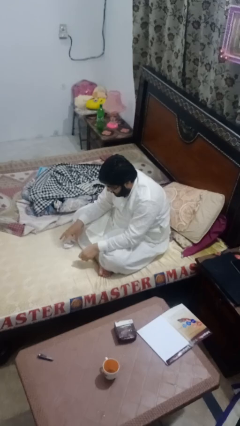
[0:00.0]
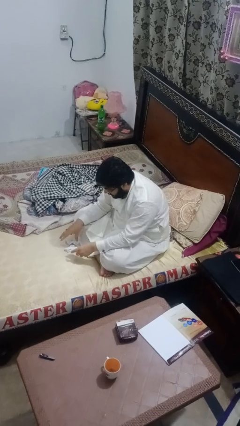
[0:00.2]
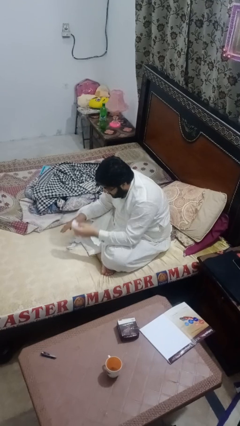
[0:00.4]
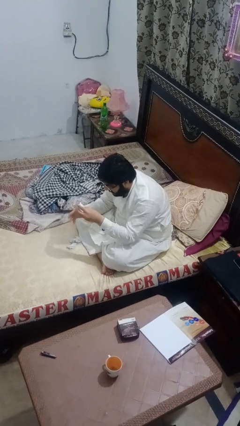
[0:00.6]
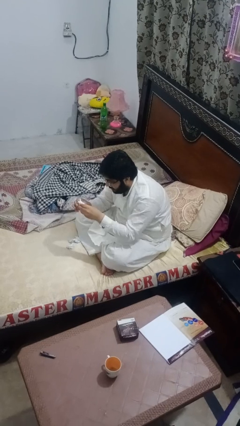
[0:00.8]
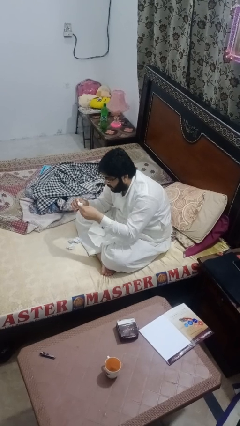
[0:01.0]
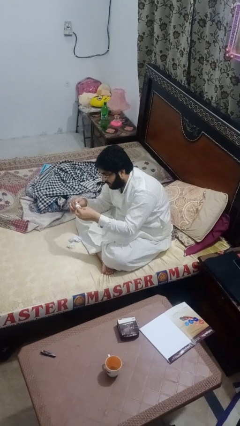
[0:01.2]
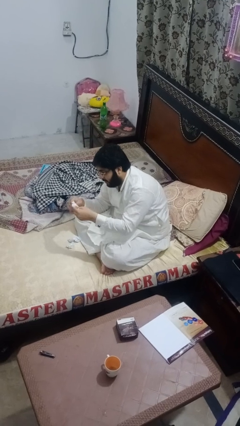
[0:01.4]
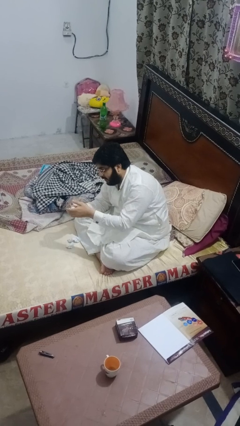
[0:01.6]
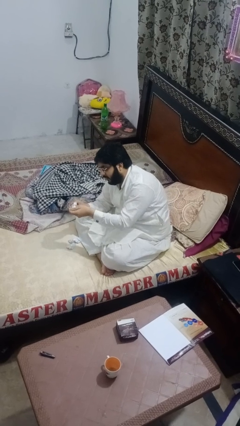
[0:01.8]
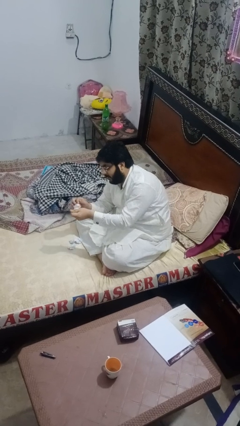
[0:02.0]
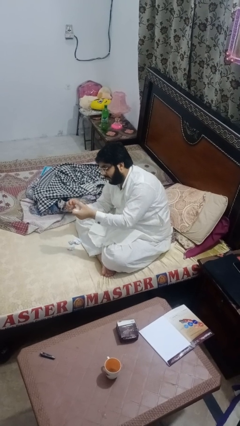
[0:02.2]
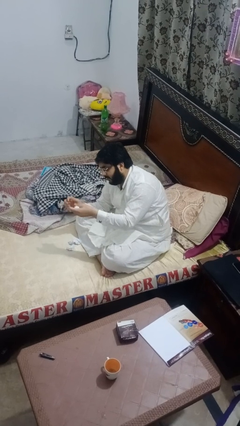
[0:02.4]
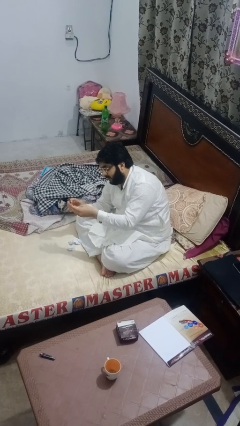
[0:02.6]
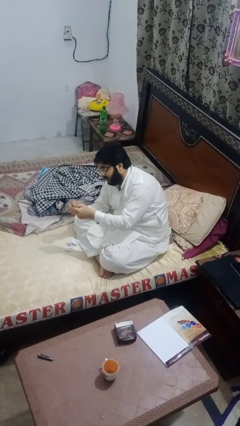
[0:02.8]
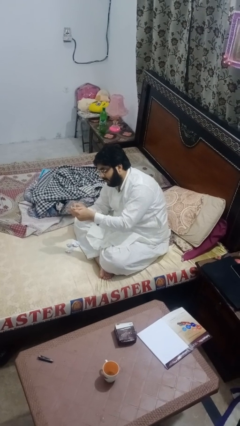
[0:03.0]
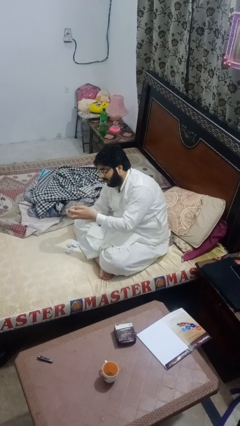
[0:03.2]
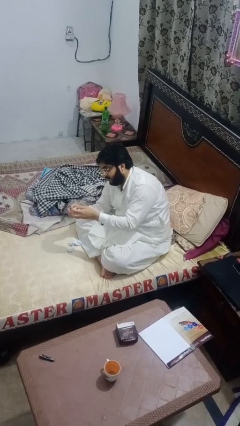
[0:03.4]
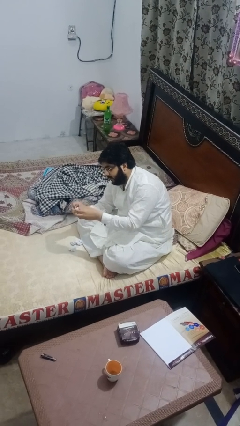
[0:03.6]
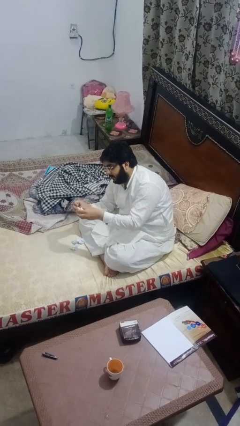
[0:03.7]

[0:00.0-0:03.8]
person crumples paper

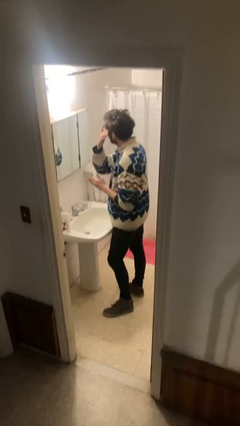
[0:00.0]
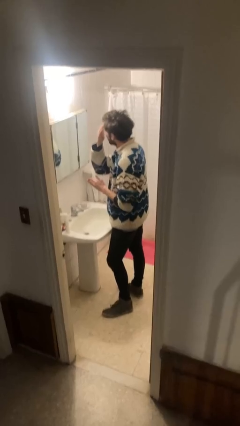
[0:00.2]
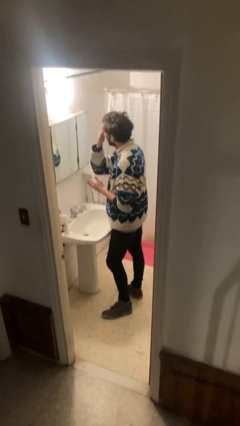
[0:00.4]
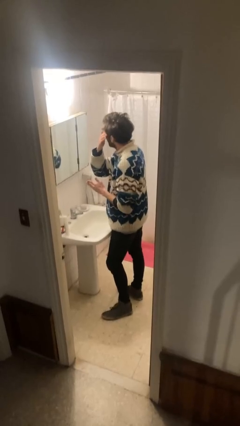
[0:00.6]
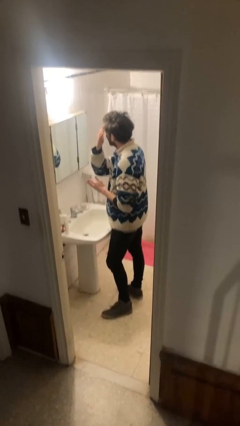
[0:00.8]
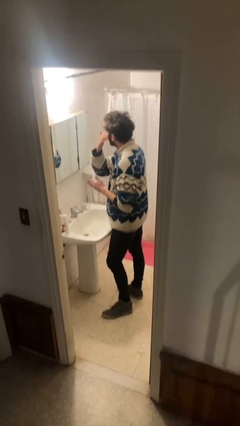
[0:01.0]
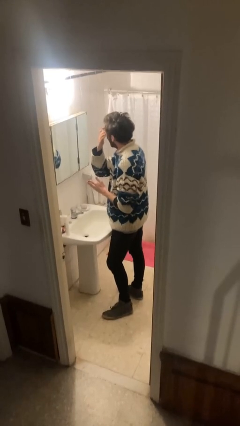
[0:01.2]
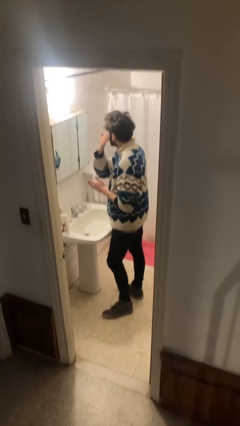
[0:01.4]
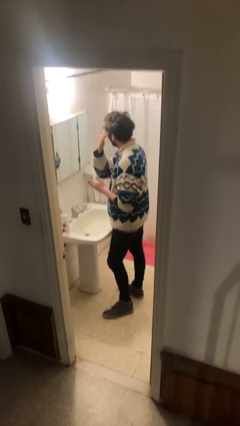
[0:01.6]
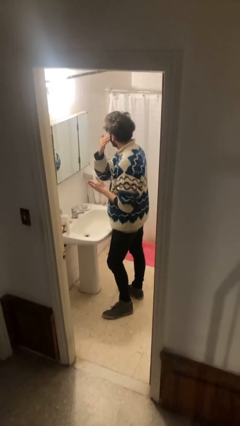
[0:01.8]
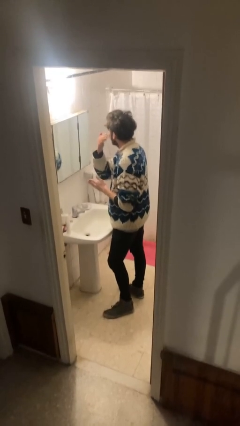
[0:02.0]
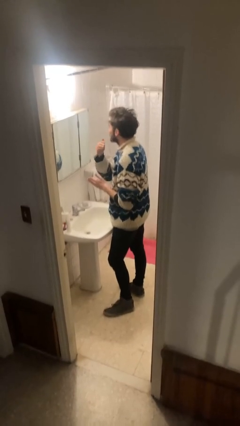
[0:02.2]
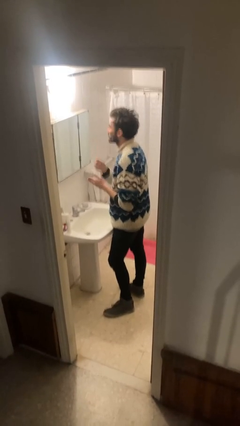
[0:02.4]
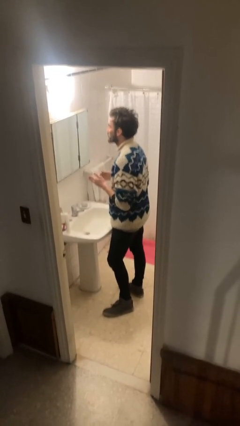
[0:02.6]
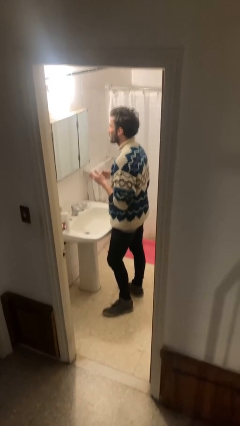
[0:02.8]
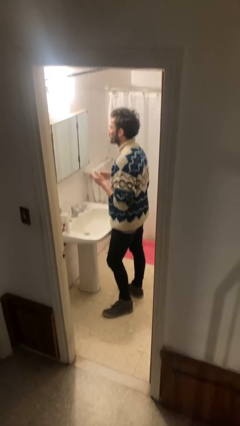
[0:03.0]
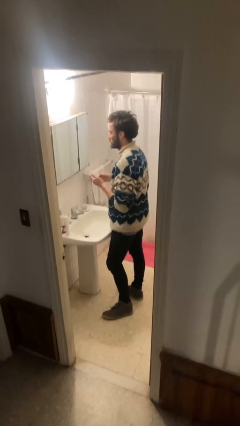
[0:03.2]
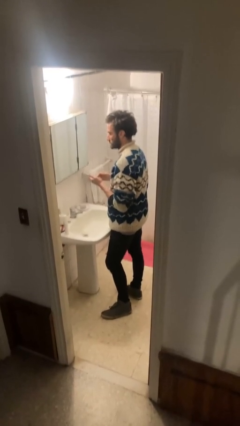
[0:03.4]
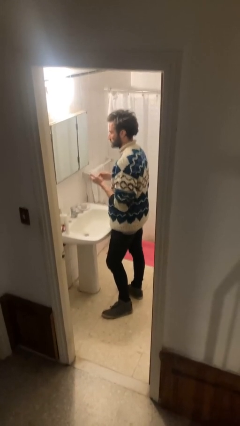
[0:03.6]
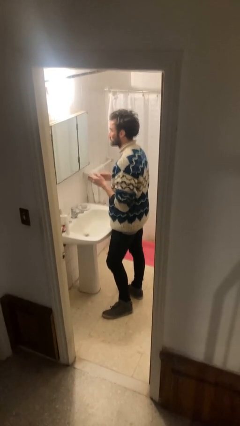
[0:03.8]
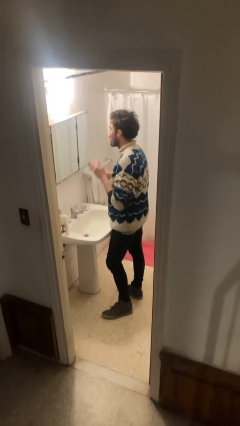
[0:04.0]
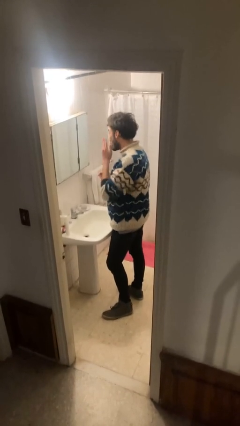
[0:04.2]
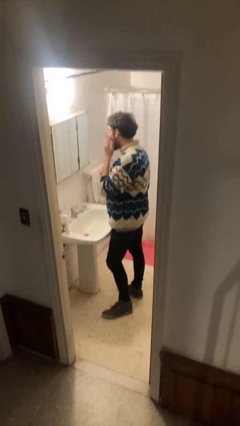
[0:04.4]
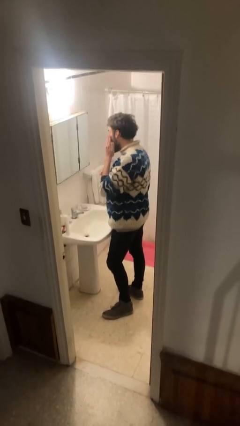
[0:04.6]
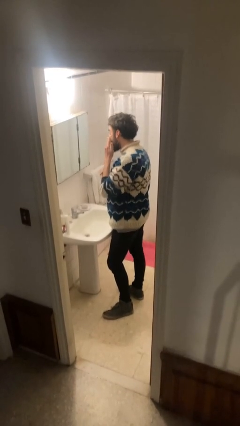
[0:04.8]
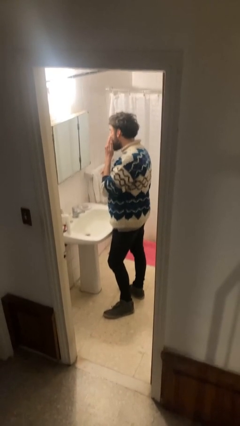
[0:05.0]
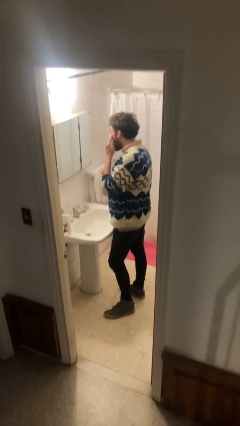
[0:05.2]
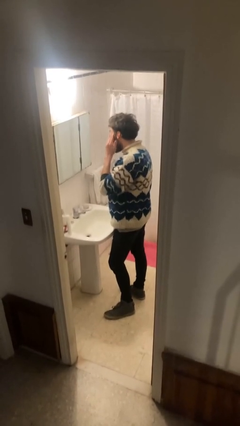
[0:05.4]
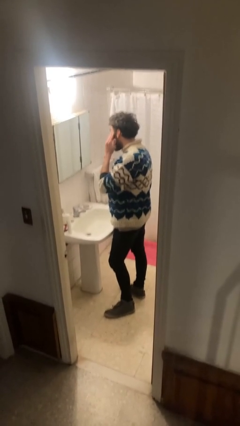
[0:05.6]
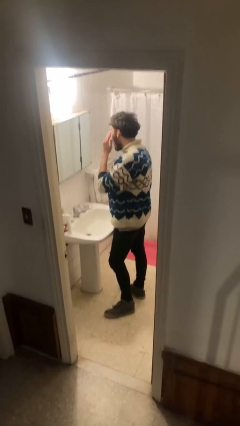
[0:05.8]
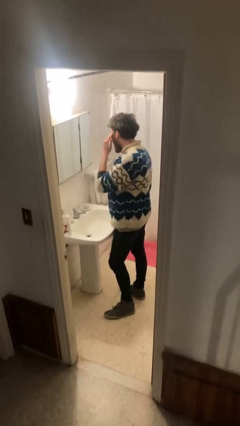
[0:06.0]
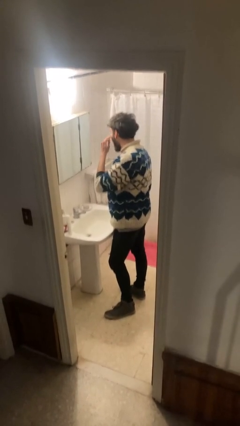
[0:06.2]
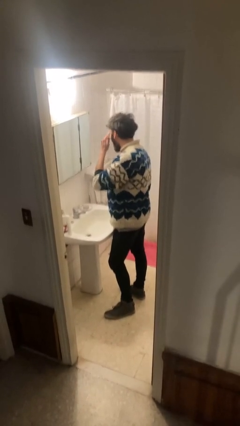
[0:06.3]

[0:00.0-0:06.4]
person applies foundation makeup

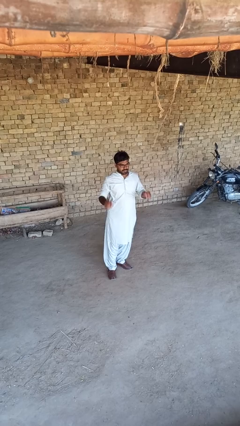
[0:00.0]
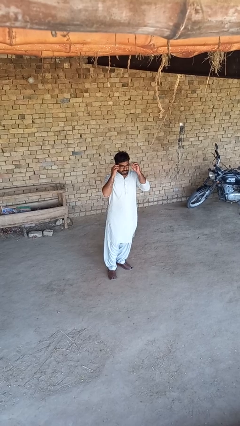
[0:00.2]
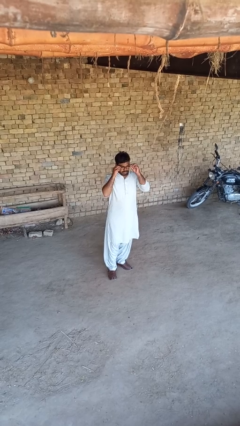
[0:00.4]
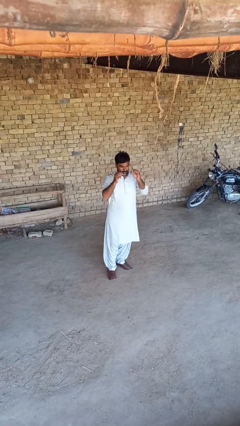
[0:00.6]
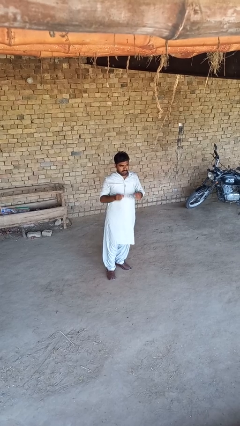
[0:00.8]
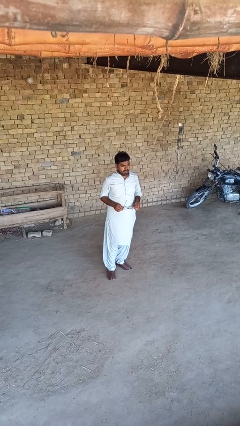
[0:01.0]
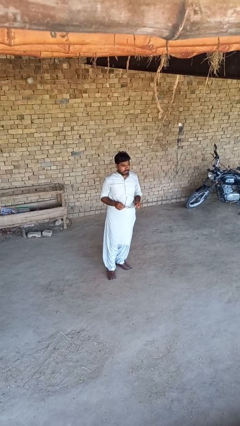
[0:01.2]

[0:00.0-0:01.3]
person takes off glasses

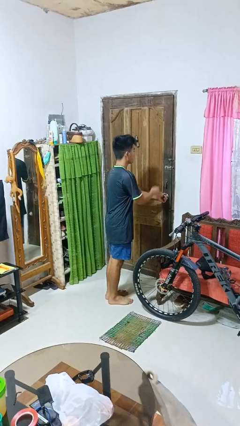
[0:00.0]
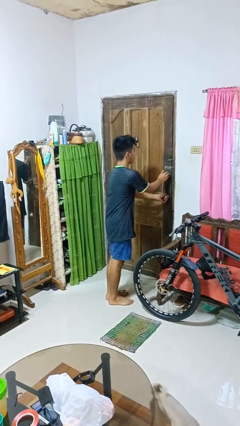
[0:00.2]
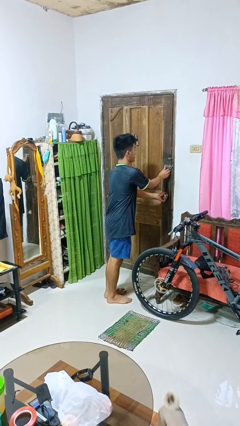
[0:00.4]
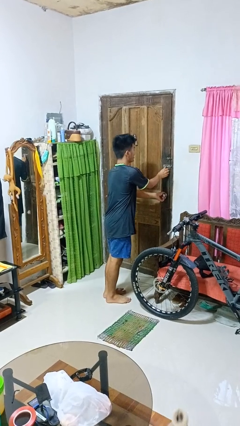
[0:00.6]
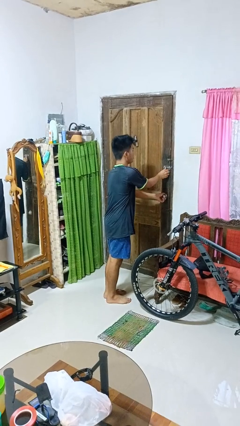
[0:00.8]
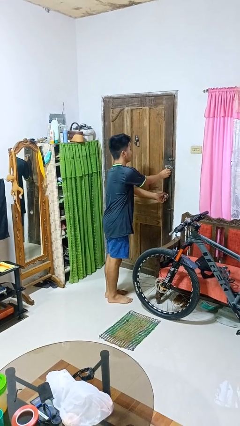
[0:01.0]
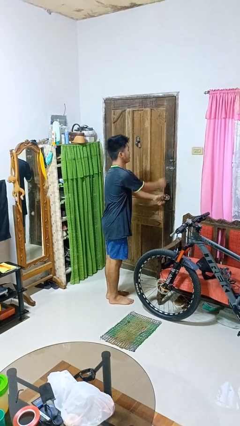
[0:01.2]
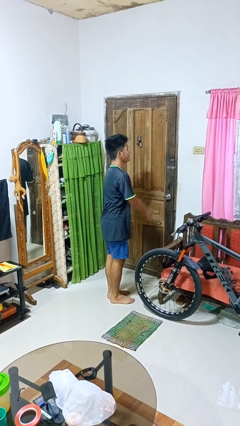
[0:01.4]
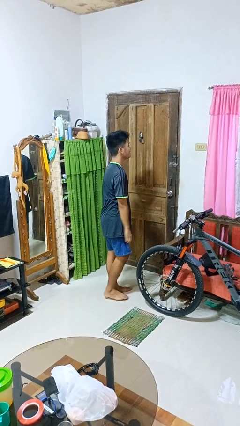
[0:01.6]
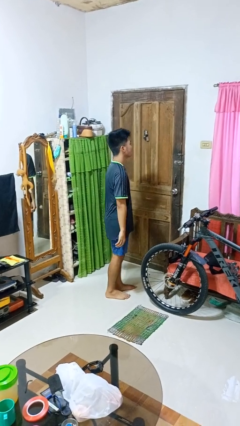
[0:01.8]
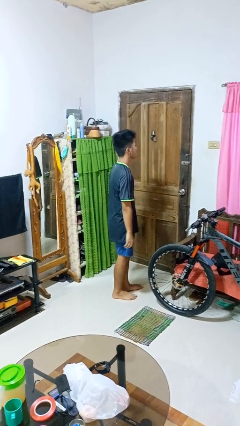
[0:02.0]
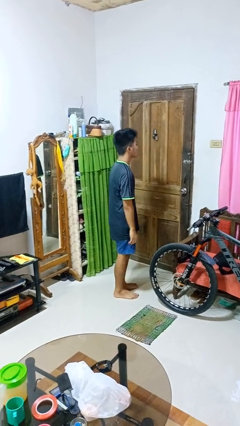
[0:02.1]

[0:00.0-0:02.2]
person locks door with keys

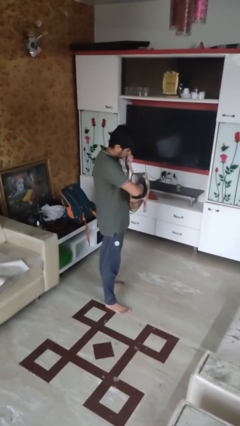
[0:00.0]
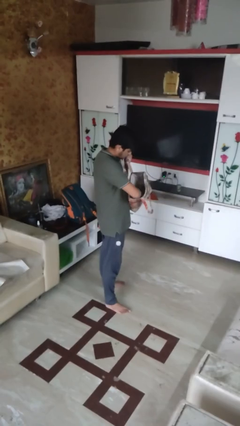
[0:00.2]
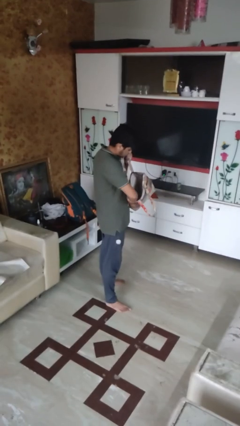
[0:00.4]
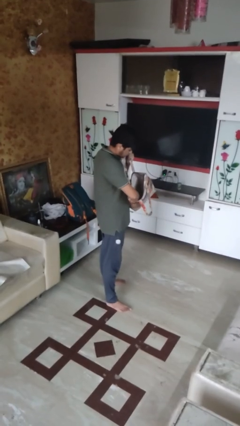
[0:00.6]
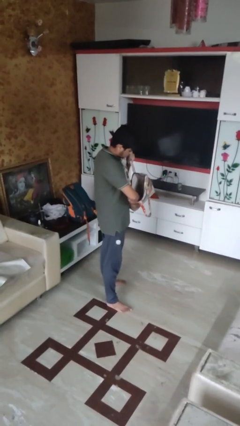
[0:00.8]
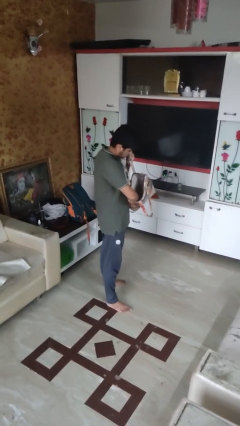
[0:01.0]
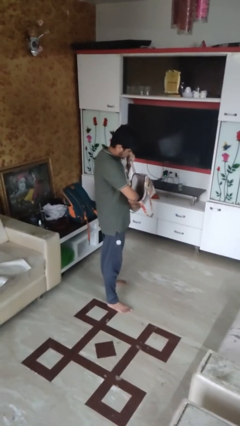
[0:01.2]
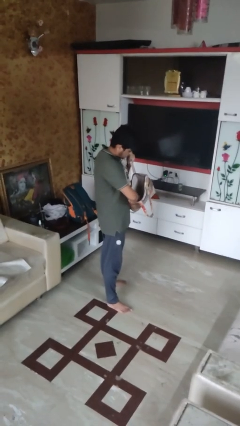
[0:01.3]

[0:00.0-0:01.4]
person searches in purse

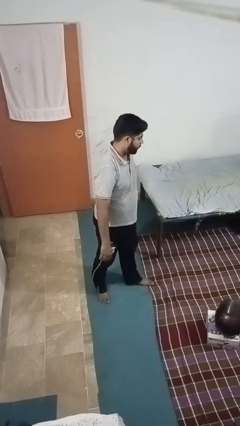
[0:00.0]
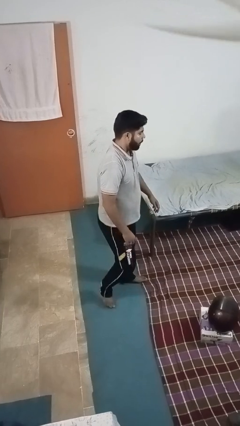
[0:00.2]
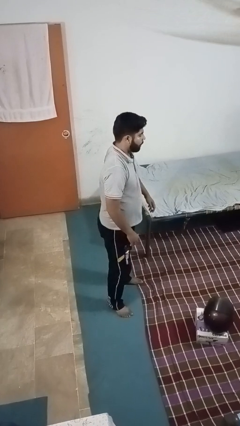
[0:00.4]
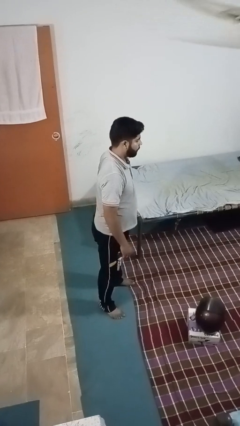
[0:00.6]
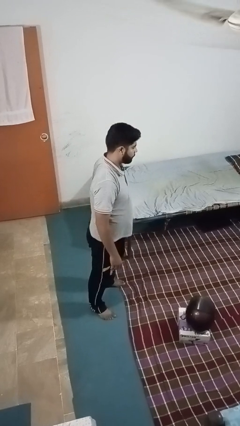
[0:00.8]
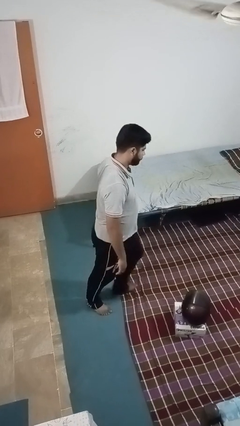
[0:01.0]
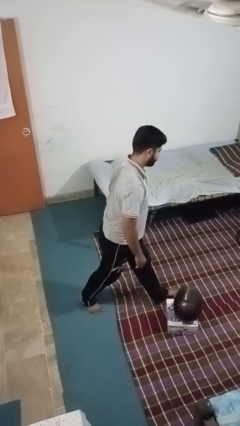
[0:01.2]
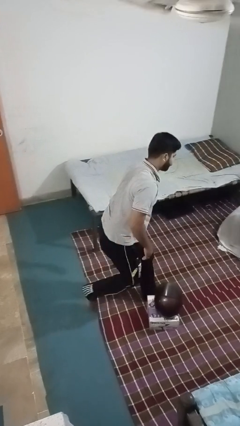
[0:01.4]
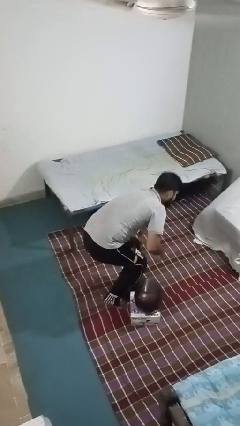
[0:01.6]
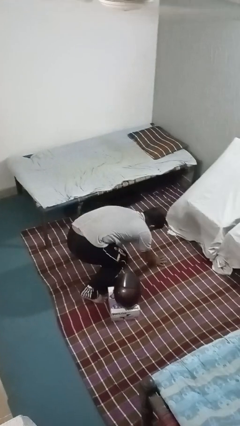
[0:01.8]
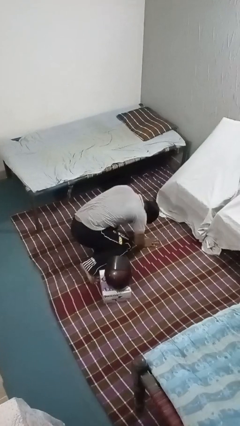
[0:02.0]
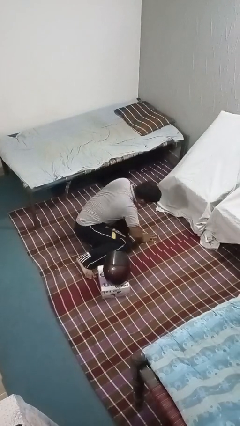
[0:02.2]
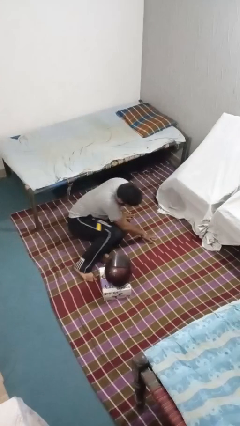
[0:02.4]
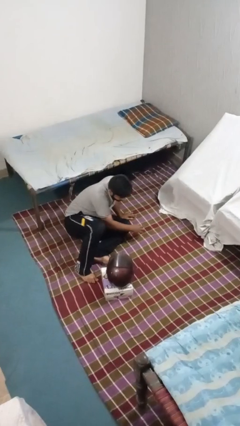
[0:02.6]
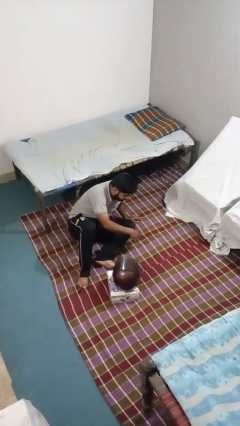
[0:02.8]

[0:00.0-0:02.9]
person trips on object on floor
